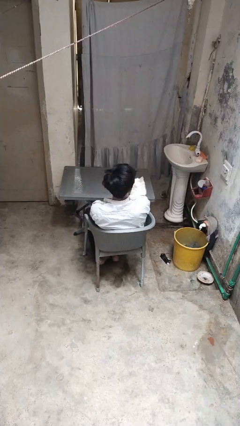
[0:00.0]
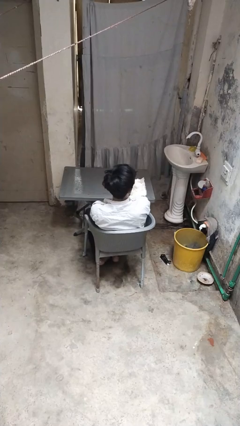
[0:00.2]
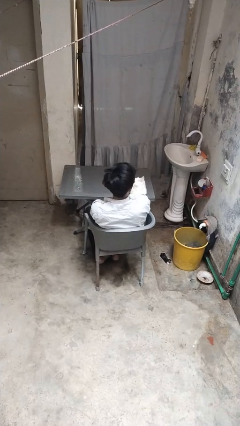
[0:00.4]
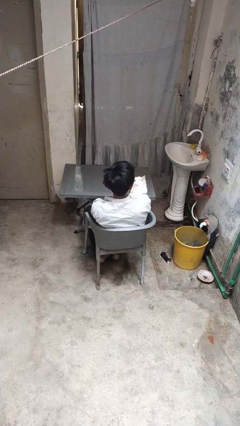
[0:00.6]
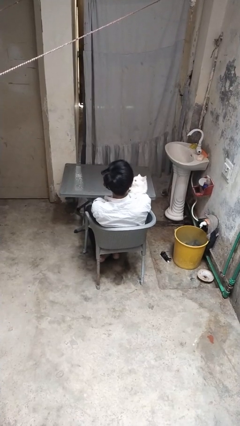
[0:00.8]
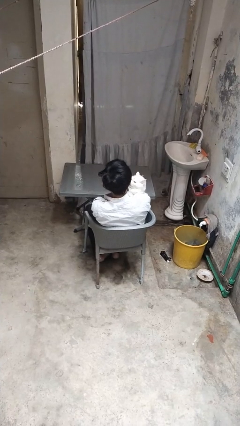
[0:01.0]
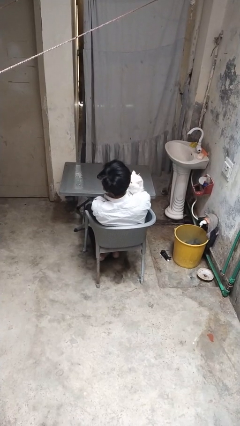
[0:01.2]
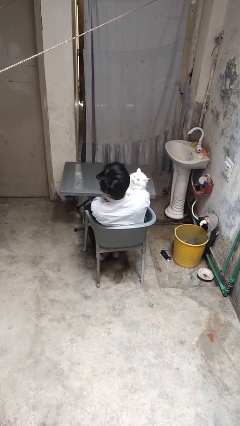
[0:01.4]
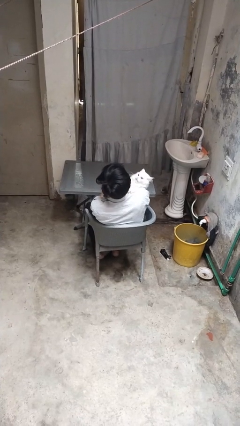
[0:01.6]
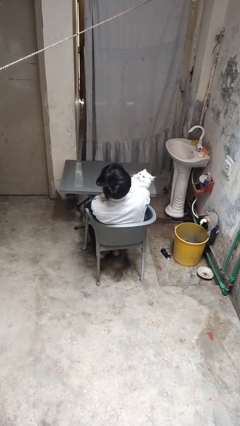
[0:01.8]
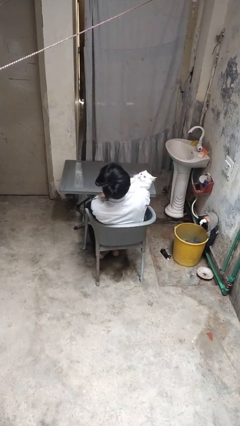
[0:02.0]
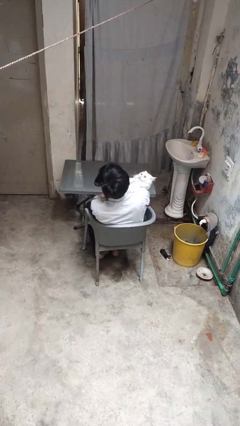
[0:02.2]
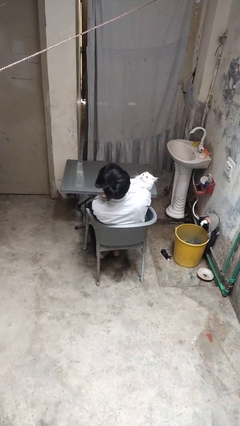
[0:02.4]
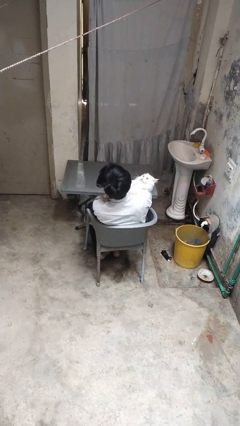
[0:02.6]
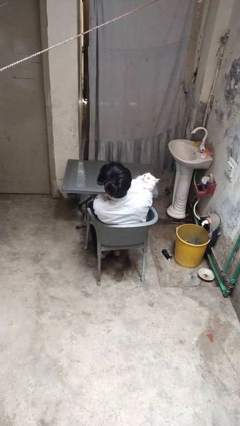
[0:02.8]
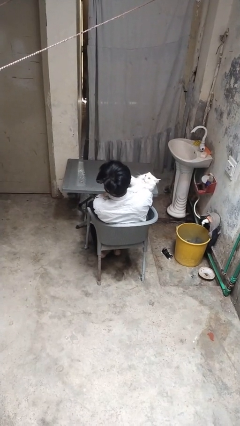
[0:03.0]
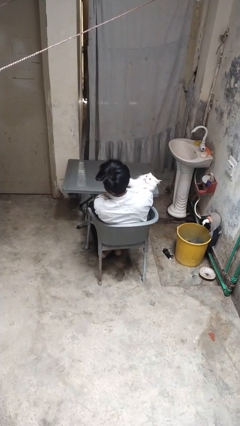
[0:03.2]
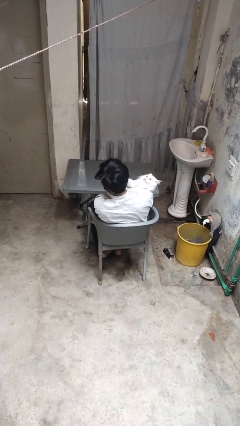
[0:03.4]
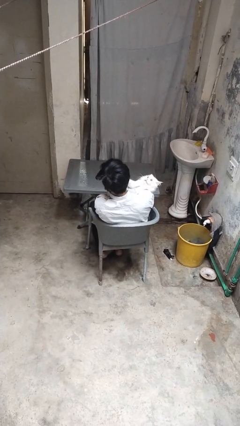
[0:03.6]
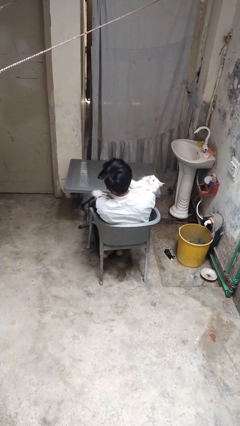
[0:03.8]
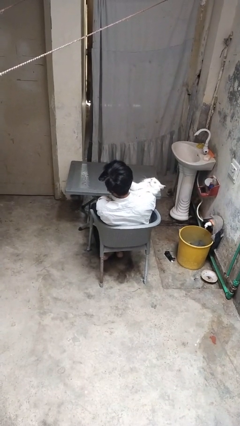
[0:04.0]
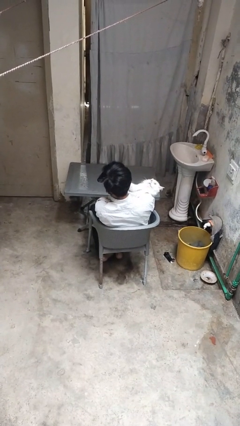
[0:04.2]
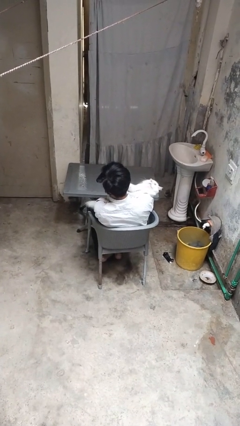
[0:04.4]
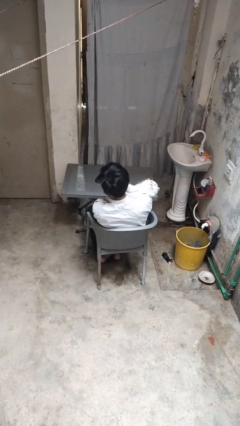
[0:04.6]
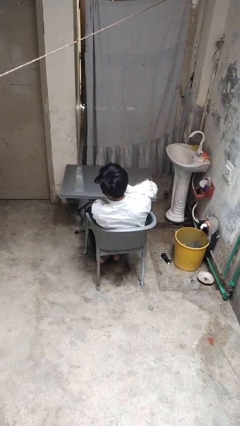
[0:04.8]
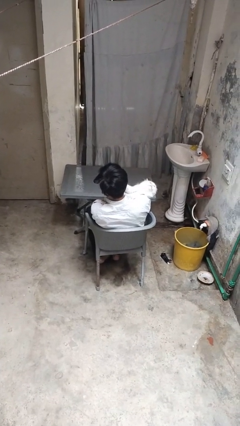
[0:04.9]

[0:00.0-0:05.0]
person hugs cat

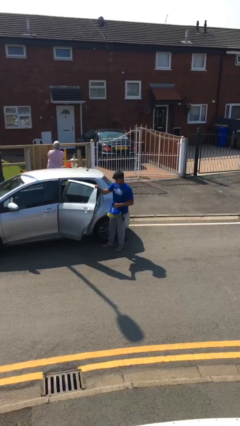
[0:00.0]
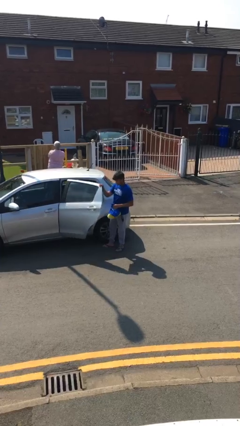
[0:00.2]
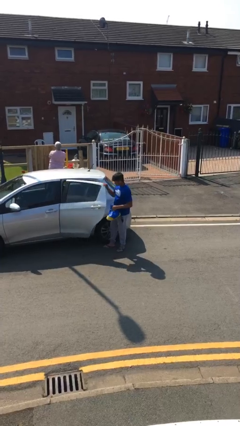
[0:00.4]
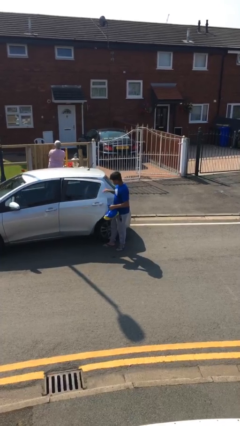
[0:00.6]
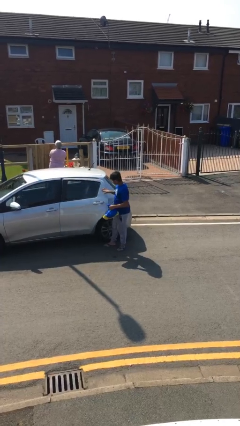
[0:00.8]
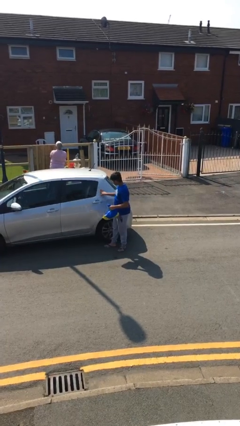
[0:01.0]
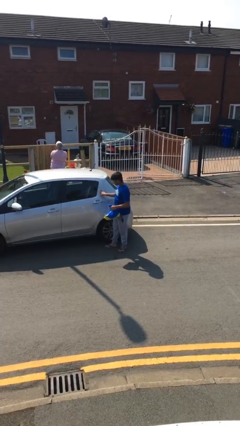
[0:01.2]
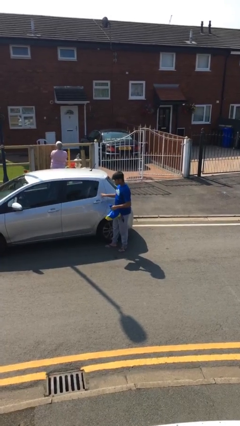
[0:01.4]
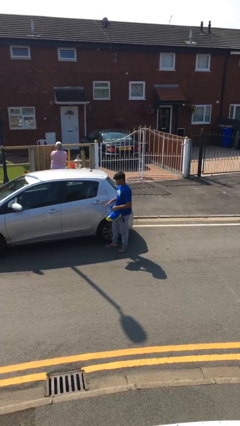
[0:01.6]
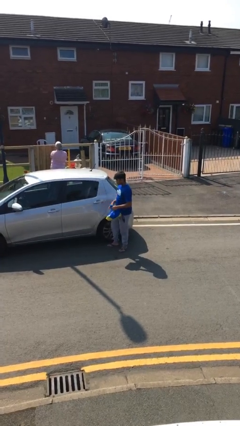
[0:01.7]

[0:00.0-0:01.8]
person closes car door

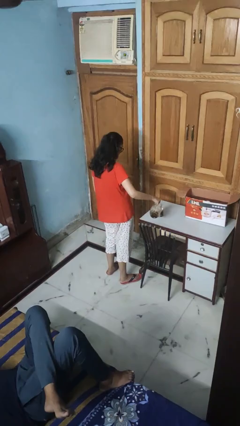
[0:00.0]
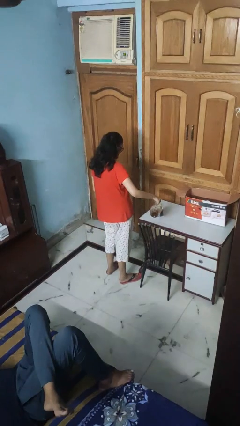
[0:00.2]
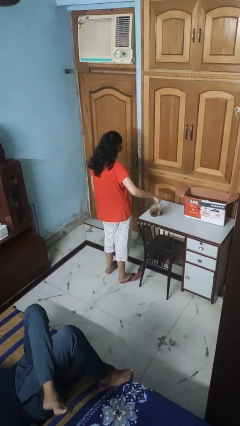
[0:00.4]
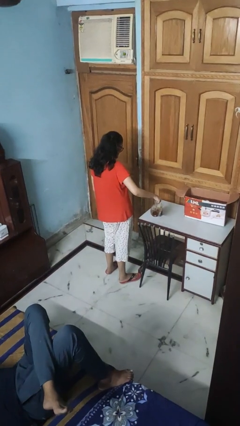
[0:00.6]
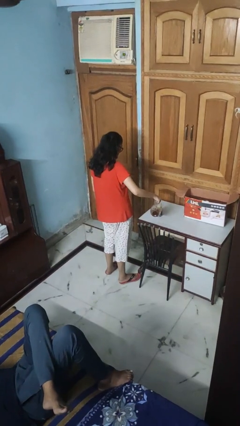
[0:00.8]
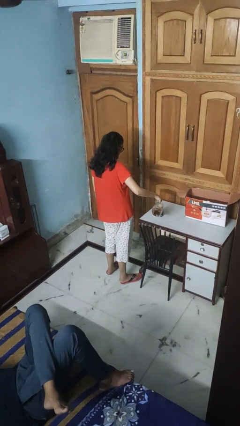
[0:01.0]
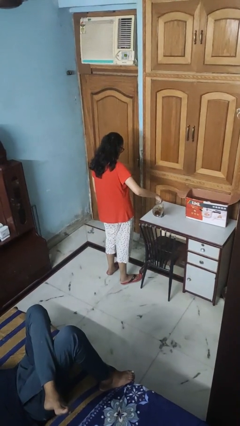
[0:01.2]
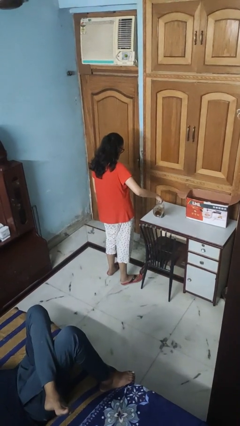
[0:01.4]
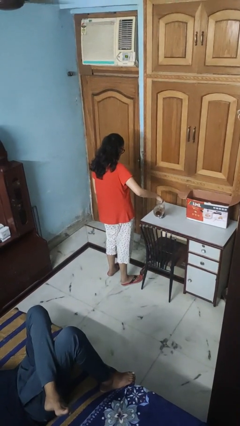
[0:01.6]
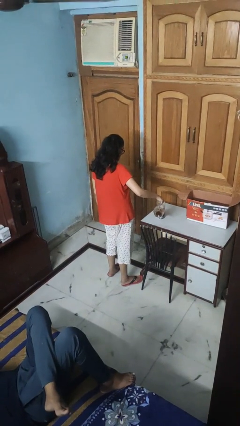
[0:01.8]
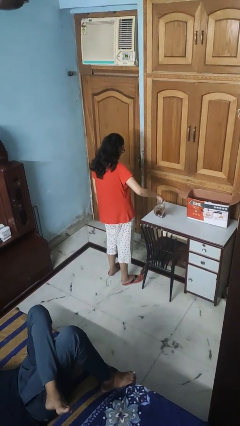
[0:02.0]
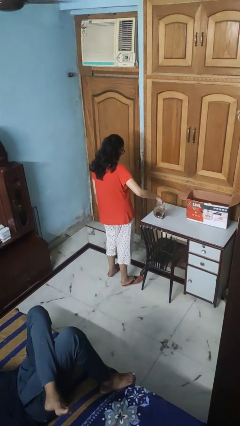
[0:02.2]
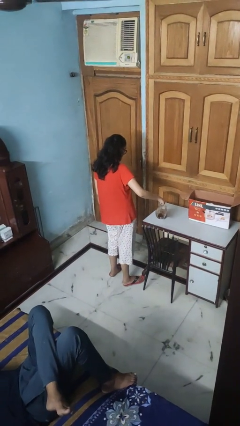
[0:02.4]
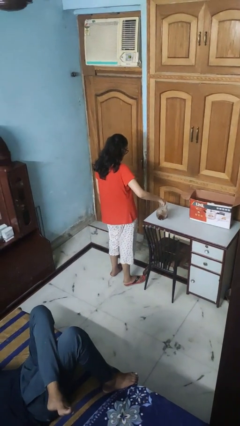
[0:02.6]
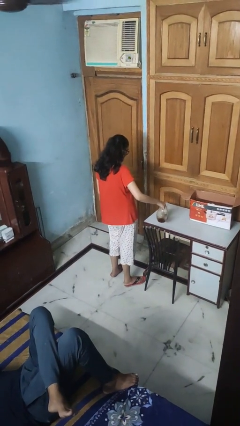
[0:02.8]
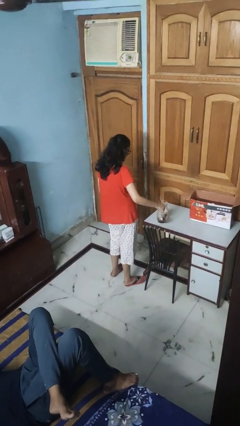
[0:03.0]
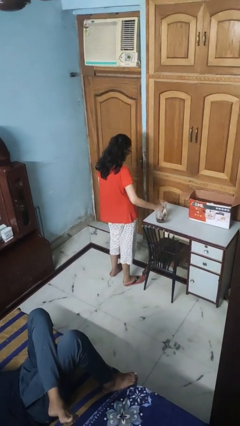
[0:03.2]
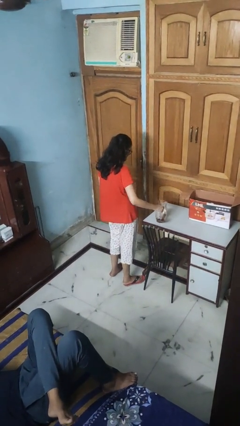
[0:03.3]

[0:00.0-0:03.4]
person pours coffee into mug

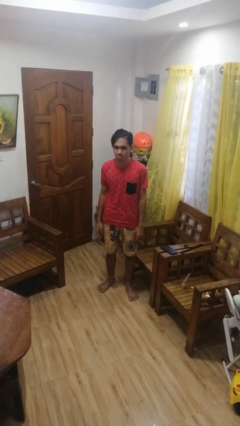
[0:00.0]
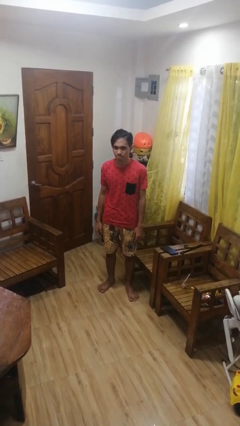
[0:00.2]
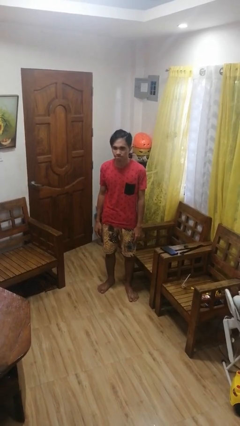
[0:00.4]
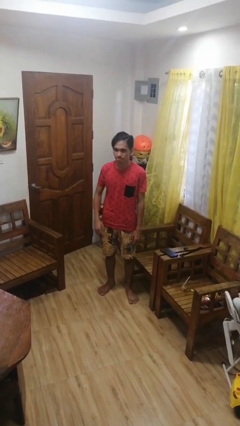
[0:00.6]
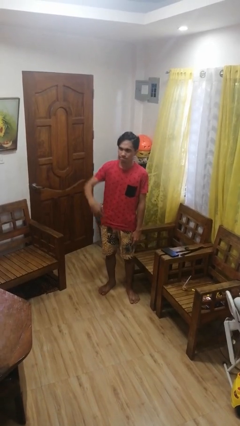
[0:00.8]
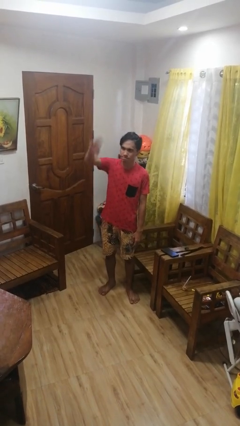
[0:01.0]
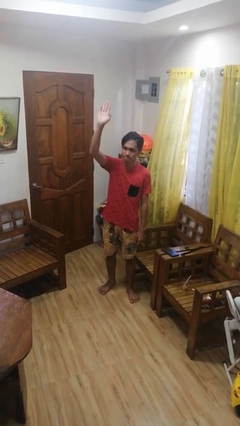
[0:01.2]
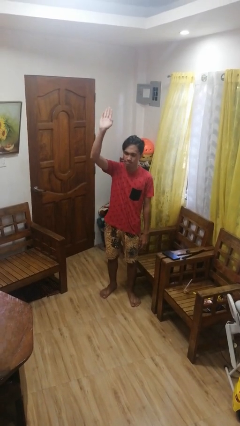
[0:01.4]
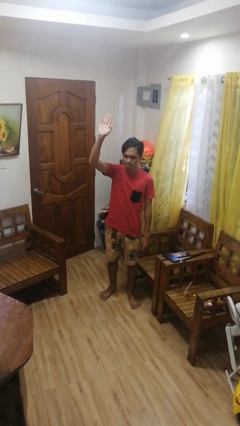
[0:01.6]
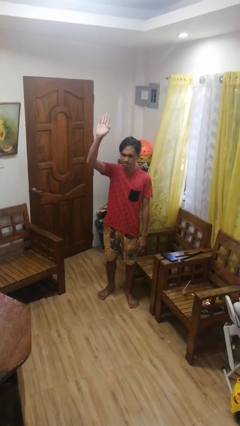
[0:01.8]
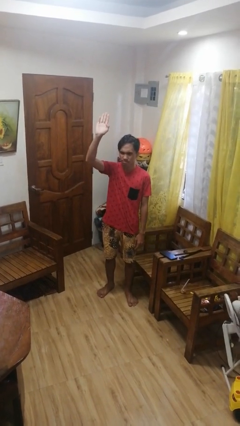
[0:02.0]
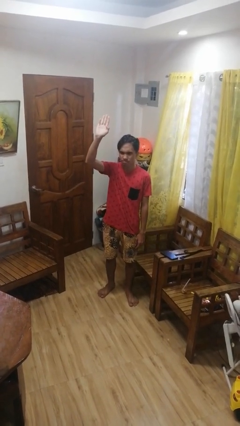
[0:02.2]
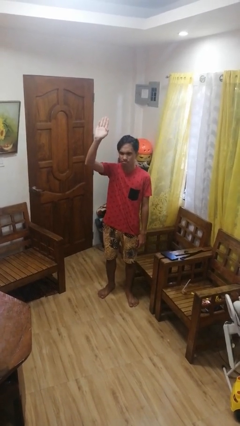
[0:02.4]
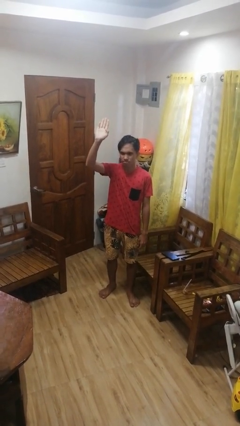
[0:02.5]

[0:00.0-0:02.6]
person gestures swipe up

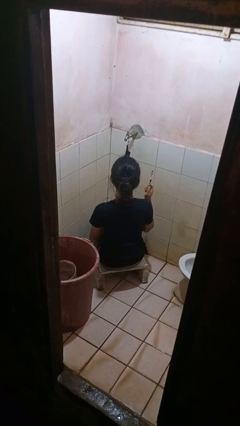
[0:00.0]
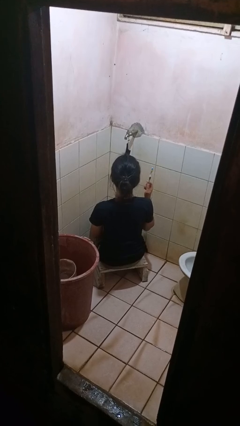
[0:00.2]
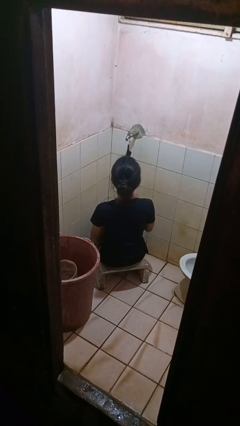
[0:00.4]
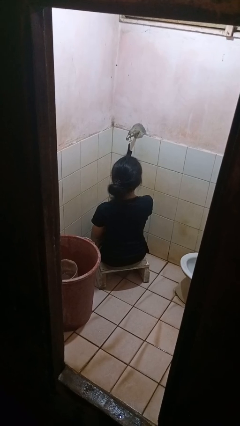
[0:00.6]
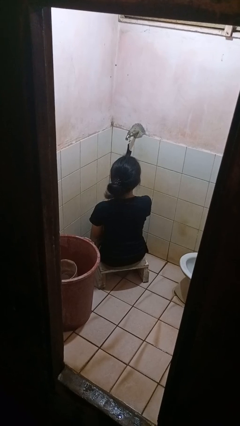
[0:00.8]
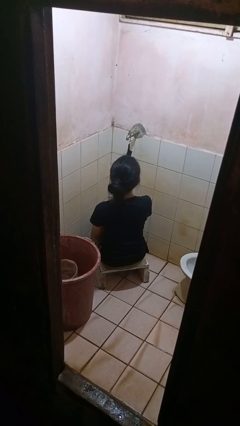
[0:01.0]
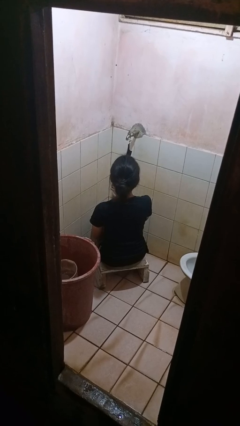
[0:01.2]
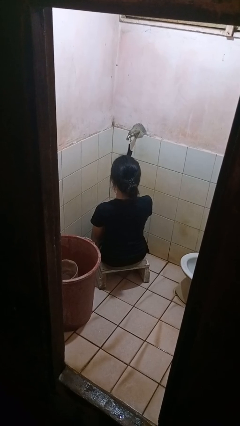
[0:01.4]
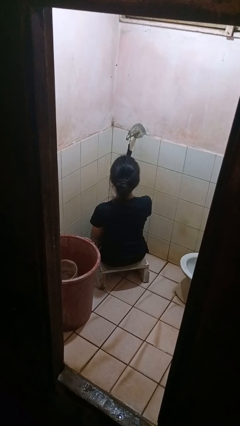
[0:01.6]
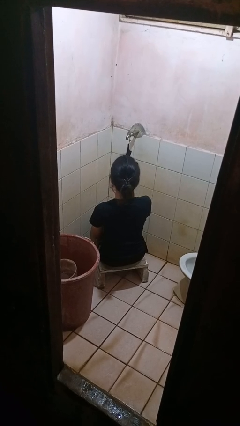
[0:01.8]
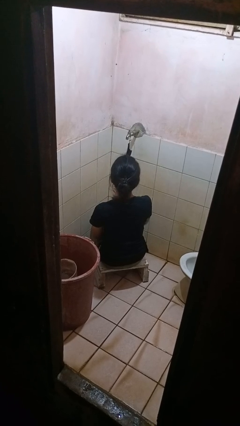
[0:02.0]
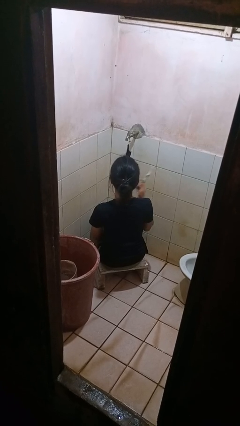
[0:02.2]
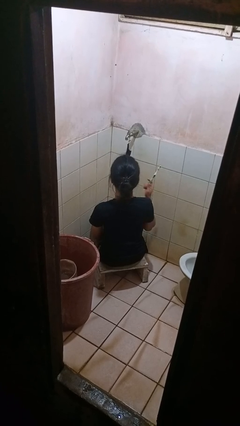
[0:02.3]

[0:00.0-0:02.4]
person brushes teeth

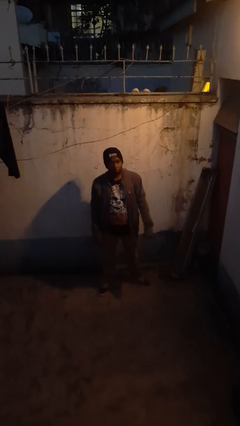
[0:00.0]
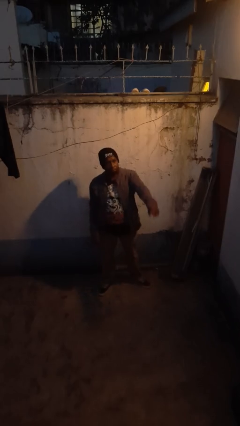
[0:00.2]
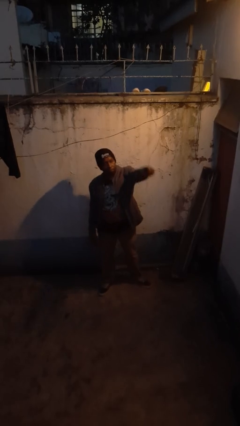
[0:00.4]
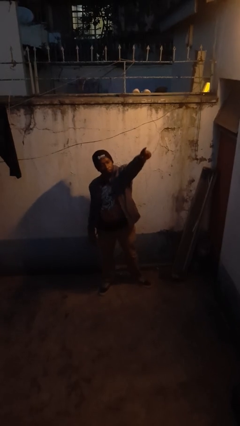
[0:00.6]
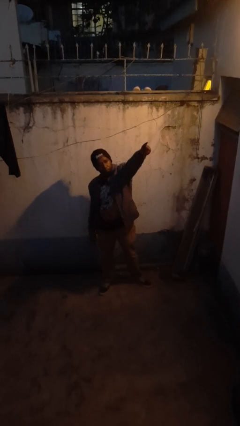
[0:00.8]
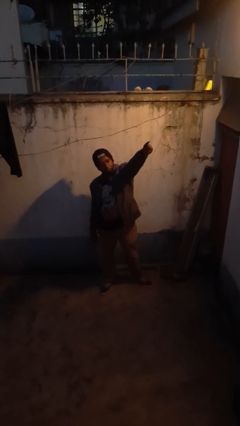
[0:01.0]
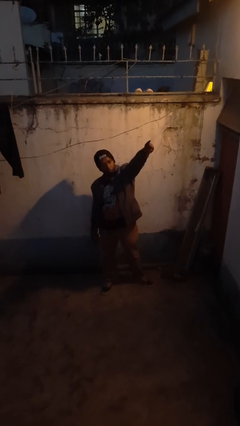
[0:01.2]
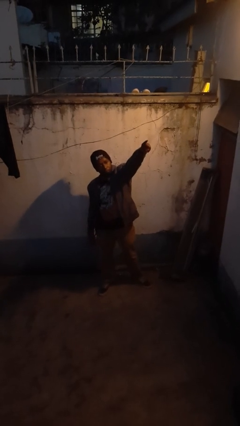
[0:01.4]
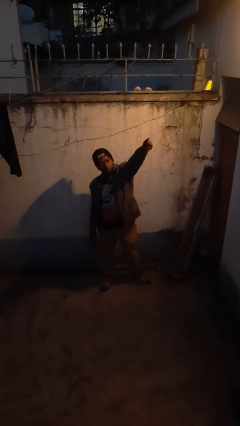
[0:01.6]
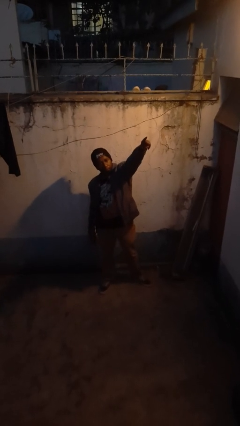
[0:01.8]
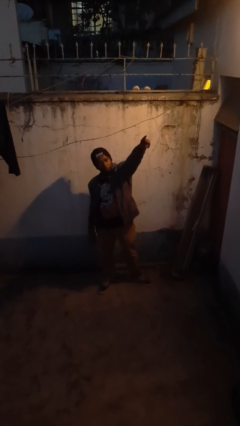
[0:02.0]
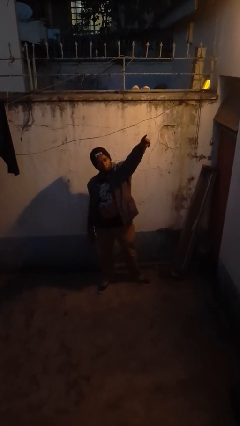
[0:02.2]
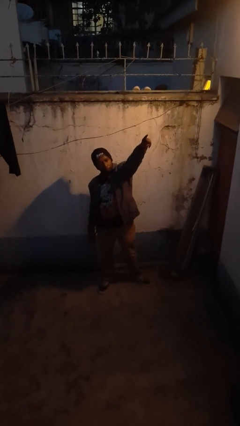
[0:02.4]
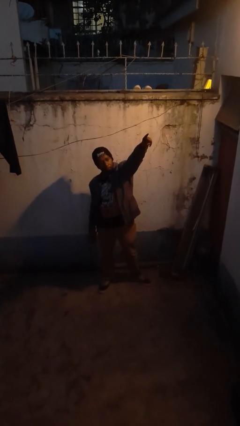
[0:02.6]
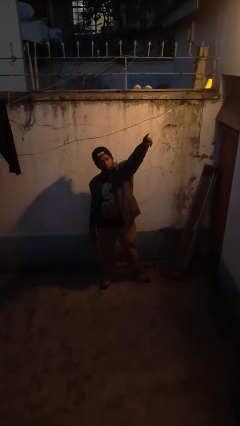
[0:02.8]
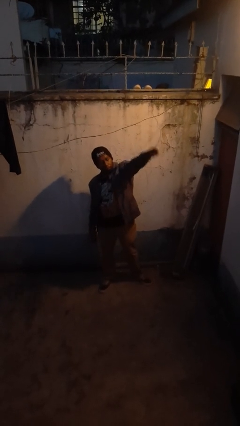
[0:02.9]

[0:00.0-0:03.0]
person points at person
